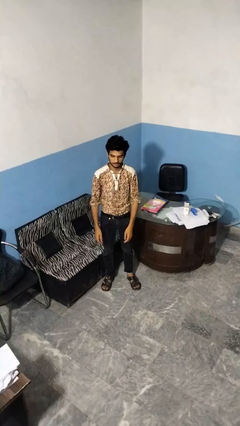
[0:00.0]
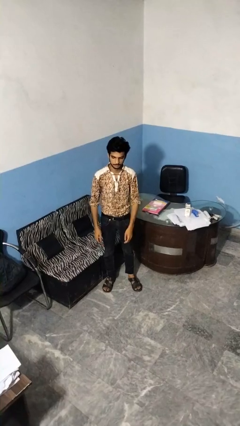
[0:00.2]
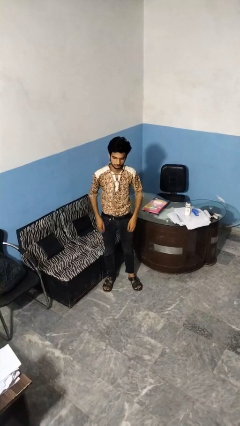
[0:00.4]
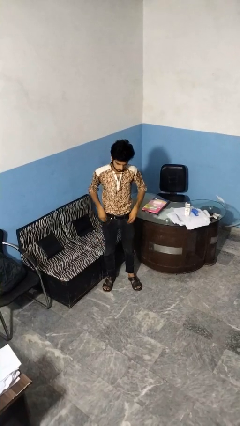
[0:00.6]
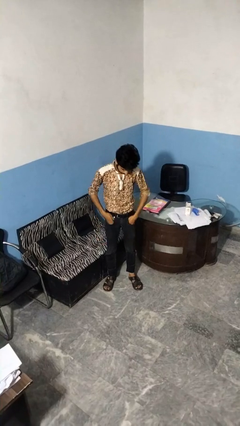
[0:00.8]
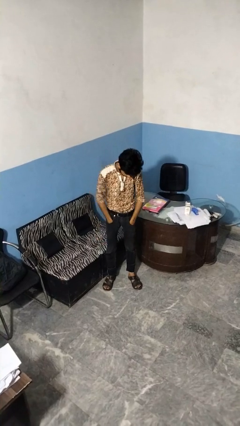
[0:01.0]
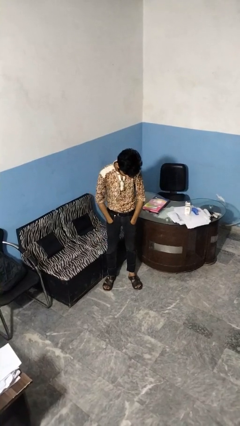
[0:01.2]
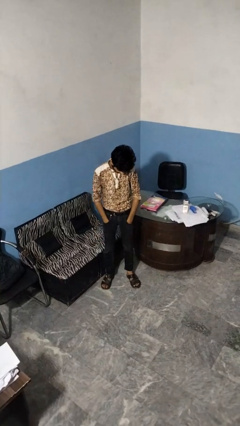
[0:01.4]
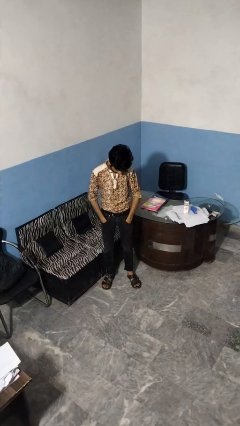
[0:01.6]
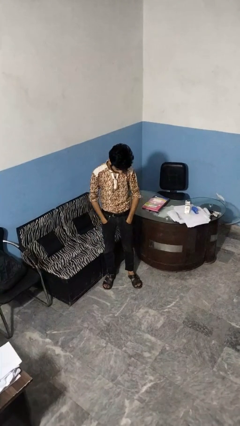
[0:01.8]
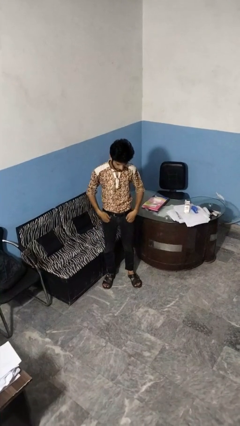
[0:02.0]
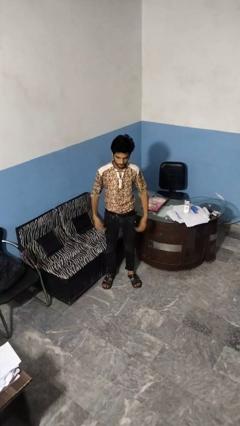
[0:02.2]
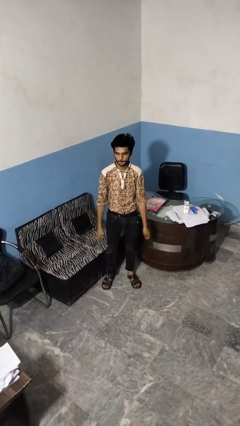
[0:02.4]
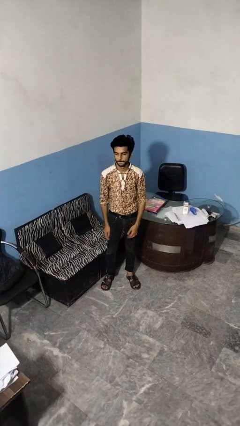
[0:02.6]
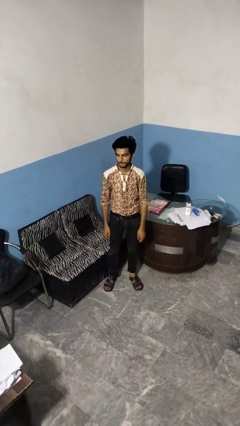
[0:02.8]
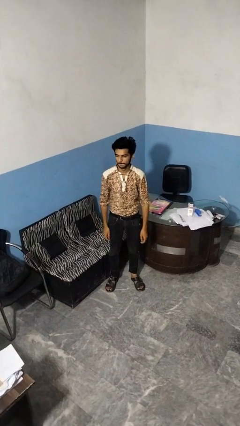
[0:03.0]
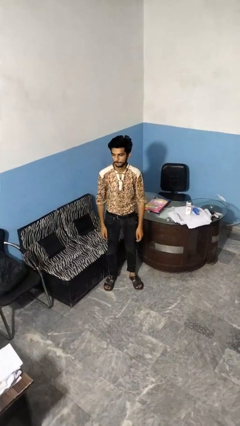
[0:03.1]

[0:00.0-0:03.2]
person puts hands in back pockets

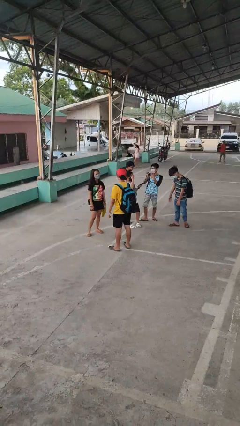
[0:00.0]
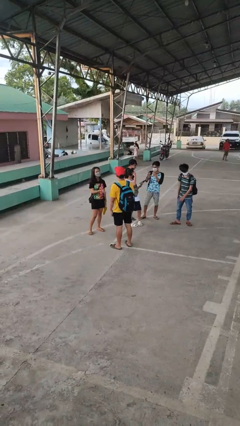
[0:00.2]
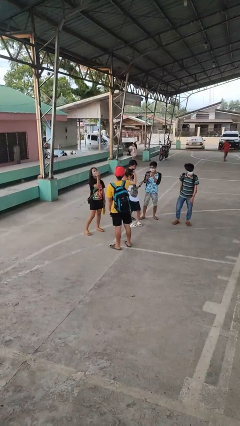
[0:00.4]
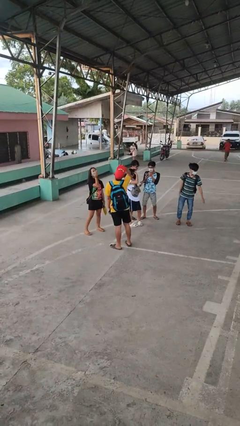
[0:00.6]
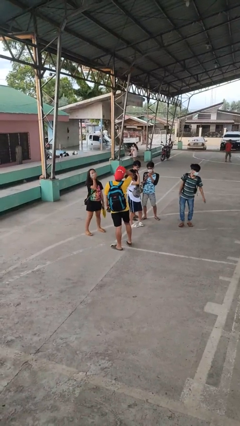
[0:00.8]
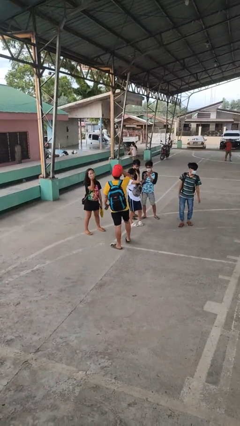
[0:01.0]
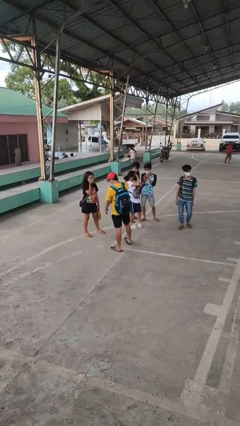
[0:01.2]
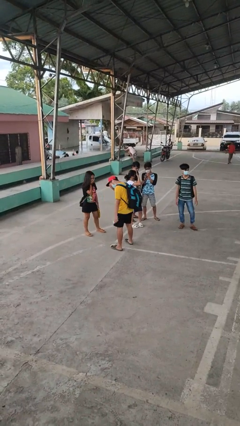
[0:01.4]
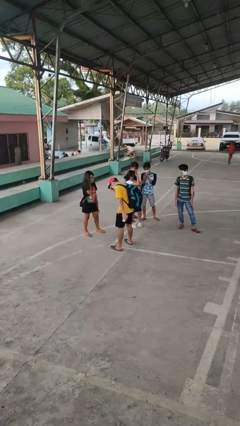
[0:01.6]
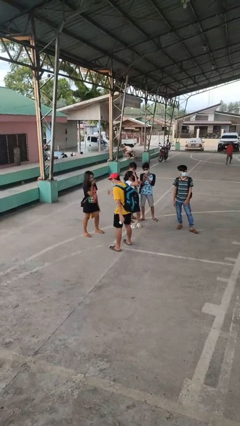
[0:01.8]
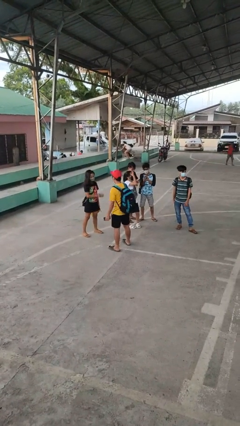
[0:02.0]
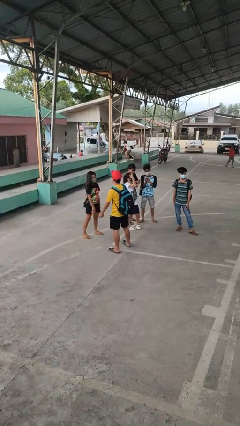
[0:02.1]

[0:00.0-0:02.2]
person laughs with person

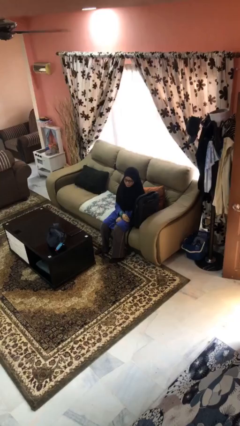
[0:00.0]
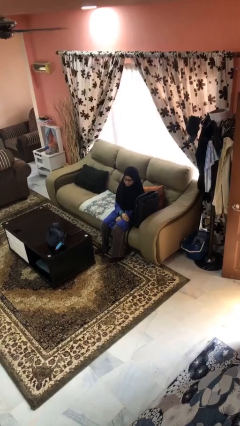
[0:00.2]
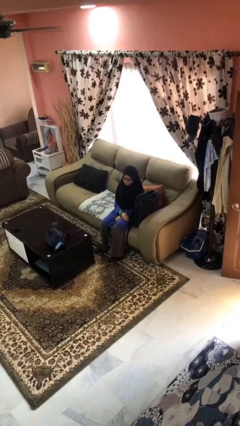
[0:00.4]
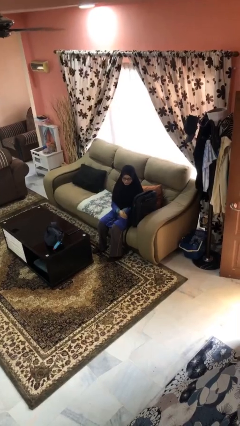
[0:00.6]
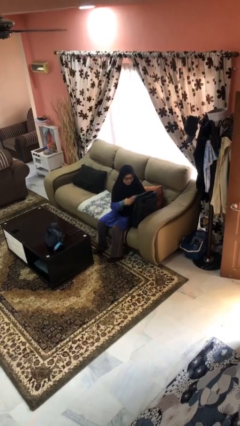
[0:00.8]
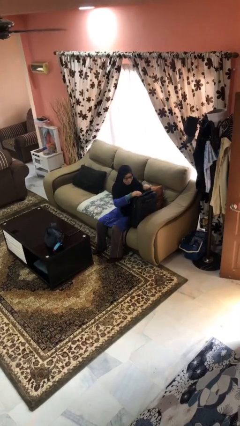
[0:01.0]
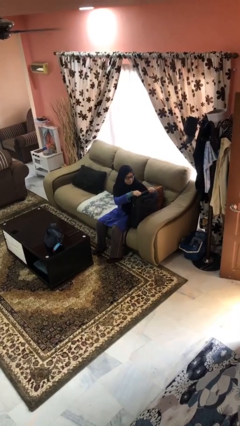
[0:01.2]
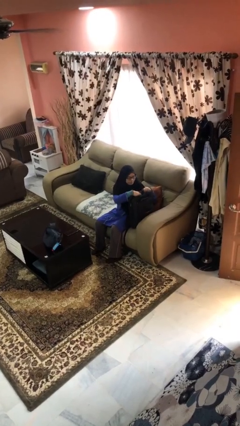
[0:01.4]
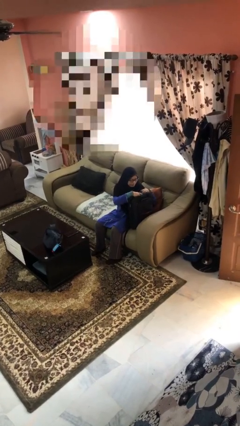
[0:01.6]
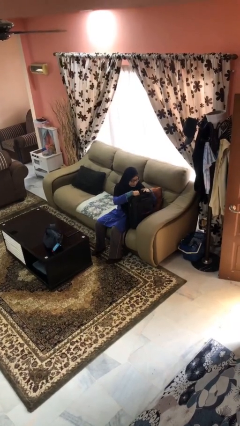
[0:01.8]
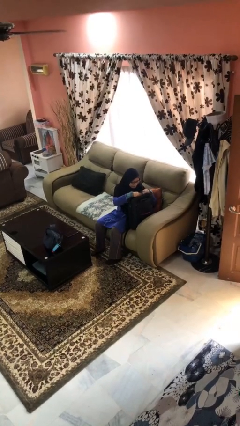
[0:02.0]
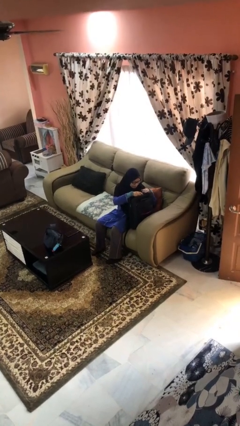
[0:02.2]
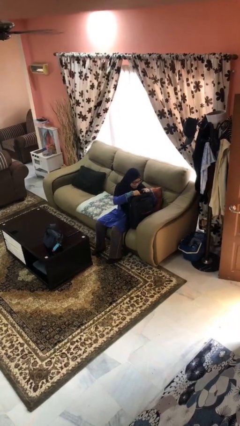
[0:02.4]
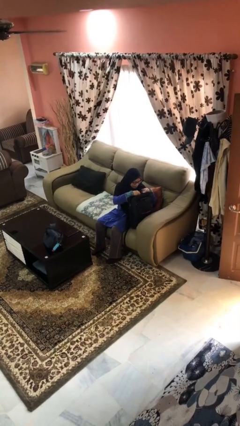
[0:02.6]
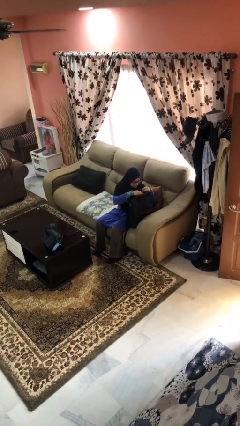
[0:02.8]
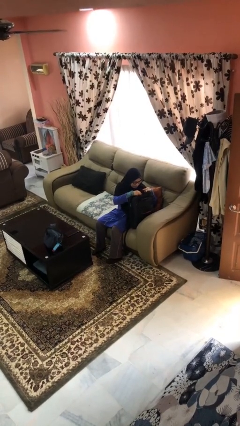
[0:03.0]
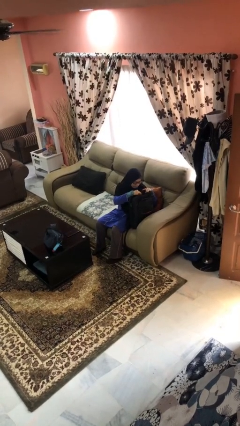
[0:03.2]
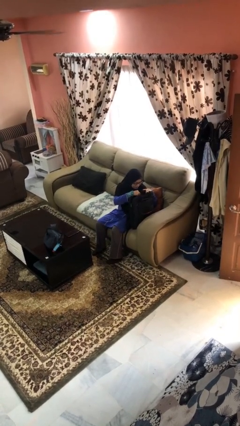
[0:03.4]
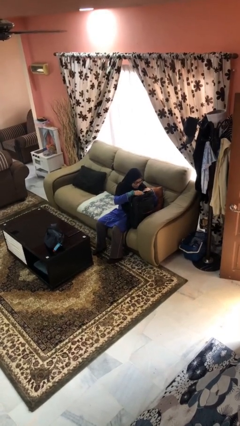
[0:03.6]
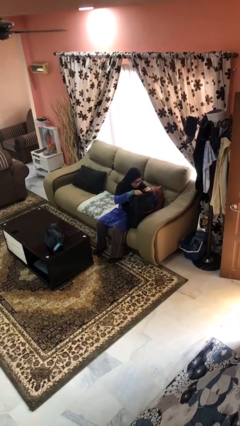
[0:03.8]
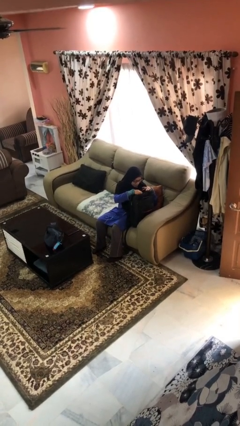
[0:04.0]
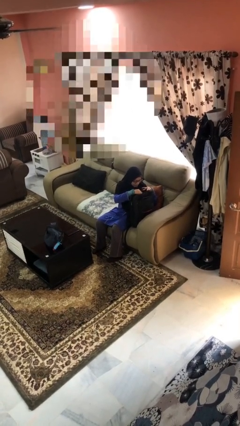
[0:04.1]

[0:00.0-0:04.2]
person searches in backpack

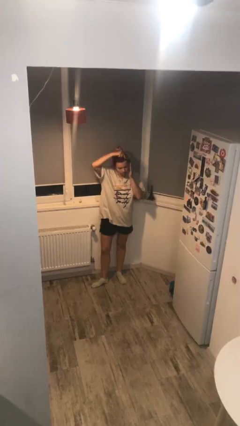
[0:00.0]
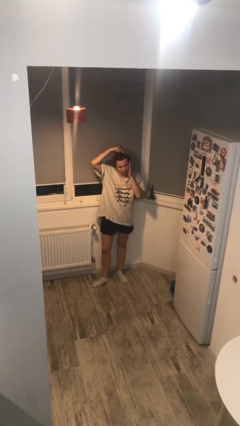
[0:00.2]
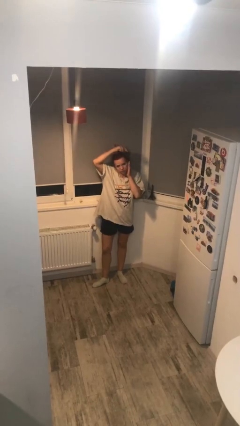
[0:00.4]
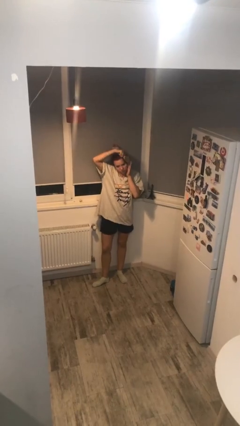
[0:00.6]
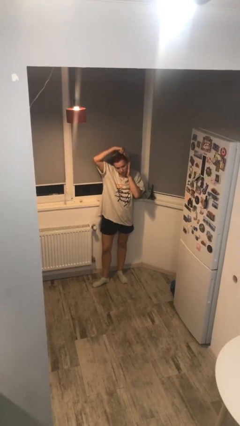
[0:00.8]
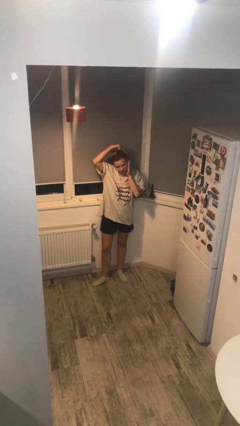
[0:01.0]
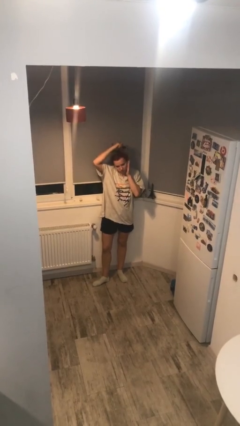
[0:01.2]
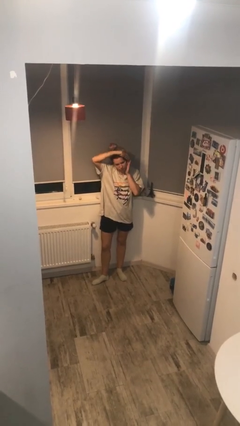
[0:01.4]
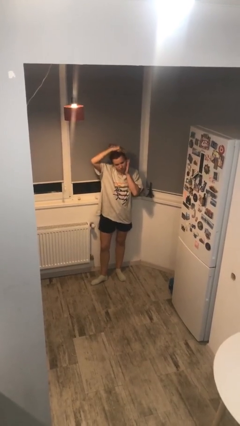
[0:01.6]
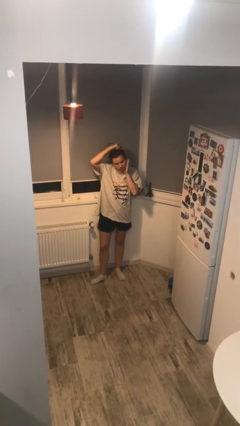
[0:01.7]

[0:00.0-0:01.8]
person brushes hair

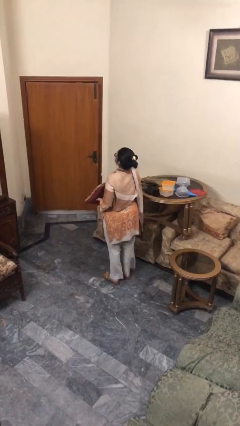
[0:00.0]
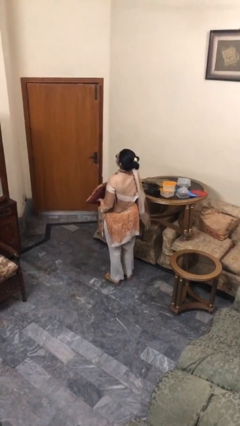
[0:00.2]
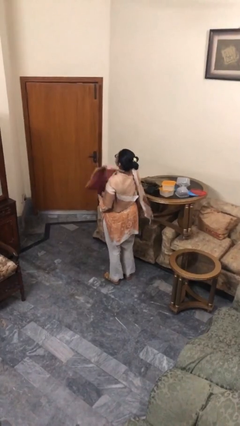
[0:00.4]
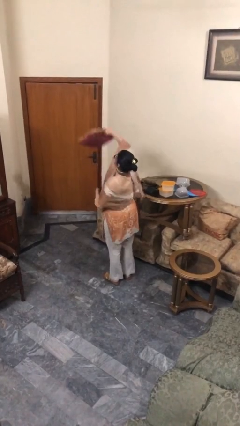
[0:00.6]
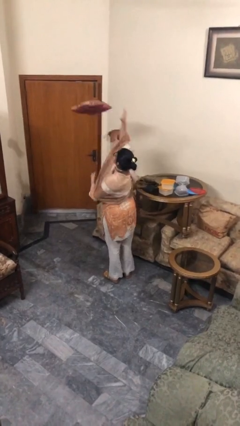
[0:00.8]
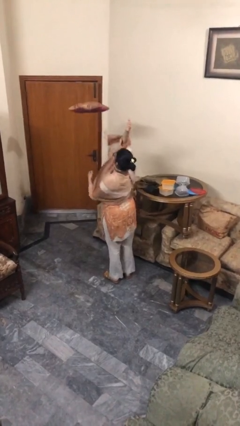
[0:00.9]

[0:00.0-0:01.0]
person drops object

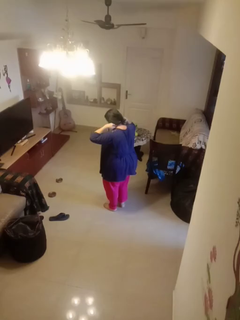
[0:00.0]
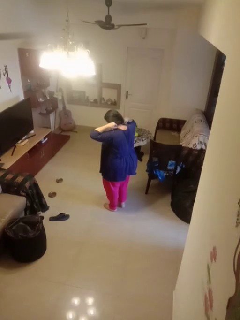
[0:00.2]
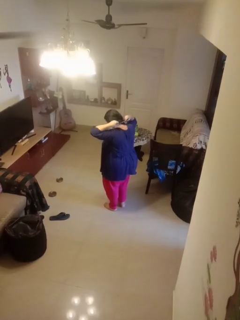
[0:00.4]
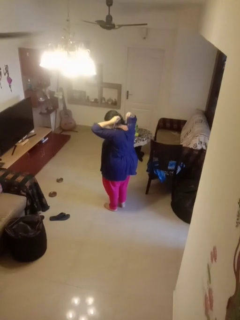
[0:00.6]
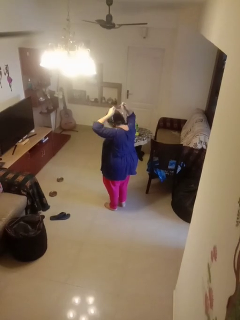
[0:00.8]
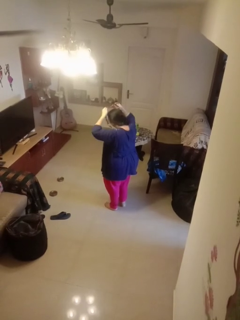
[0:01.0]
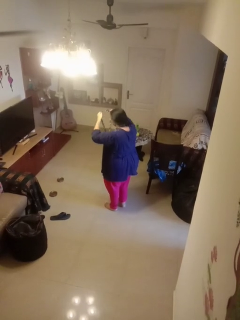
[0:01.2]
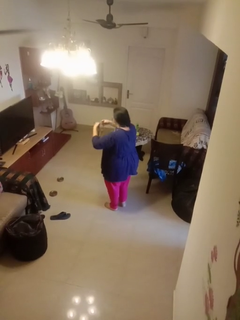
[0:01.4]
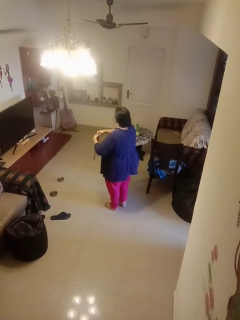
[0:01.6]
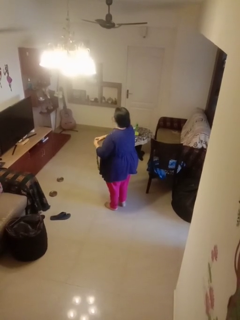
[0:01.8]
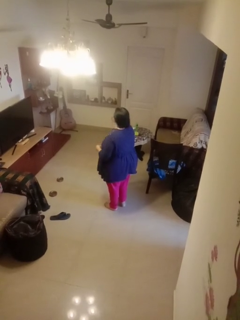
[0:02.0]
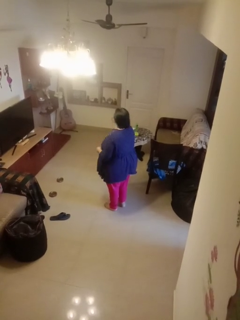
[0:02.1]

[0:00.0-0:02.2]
person takes off necklace

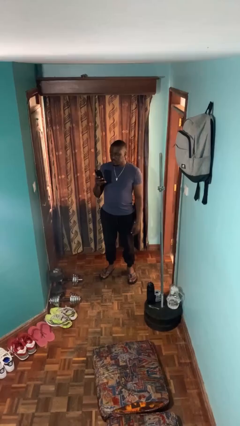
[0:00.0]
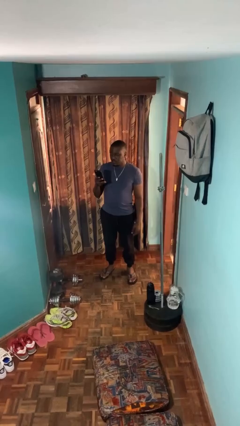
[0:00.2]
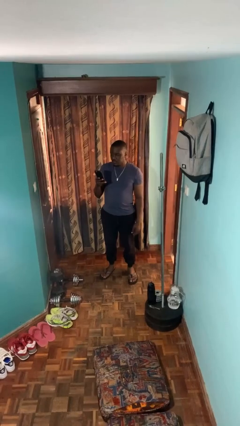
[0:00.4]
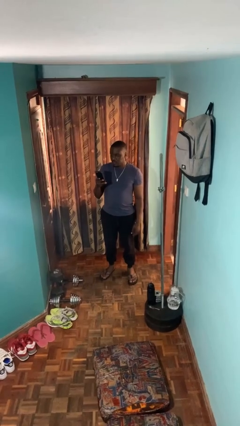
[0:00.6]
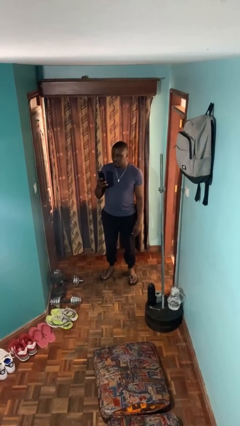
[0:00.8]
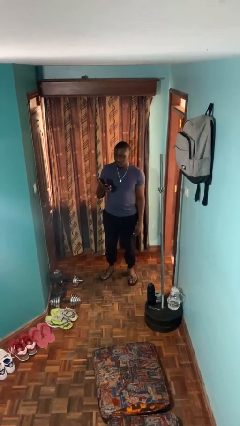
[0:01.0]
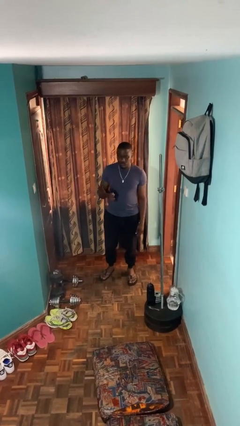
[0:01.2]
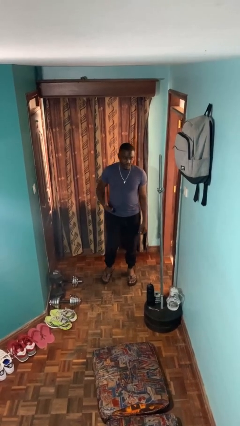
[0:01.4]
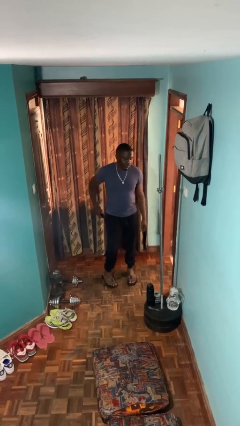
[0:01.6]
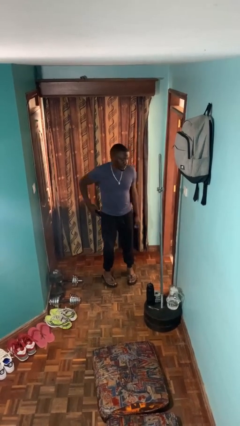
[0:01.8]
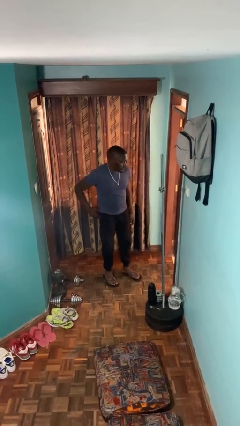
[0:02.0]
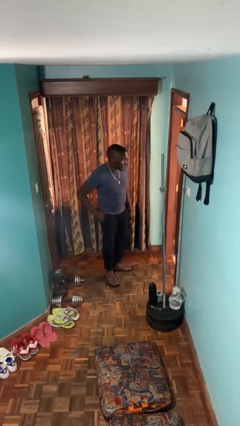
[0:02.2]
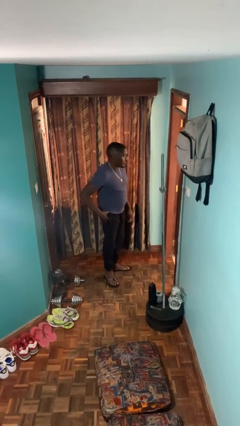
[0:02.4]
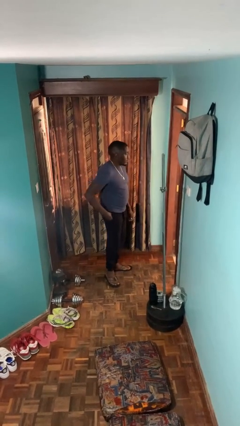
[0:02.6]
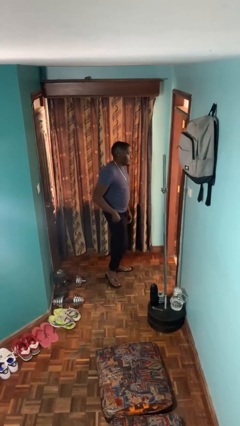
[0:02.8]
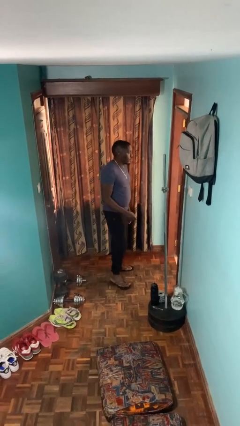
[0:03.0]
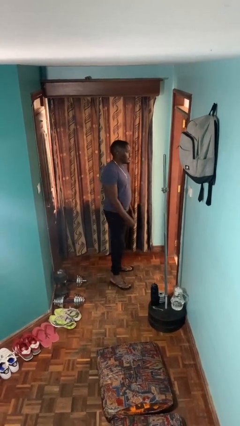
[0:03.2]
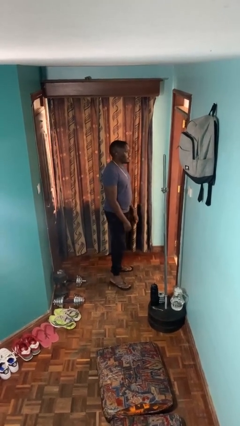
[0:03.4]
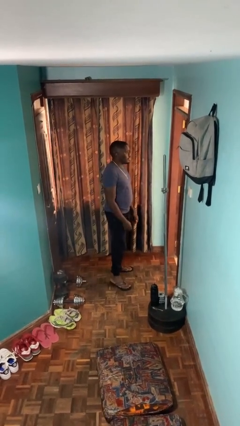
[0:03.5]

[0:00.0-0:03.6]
person puts phone into pocket
